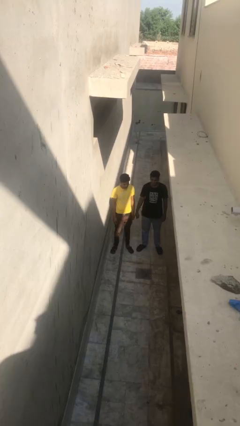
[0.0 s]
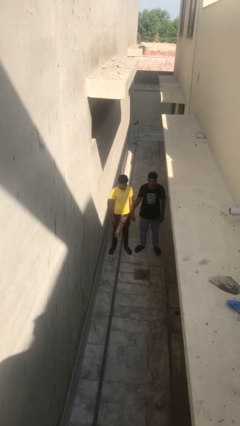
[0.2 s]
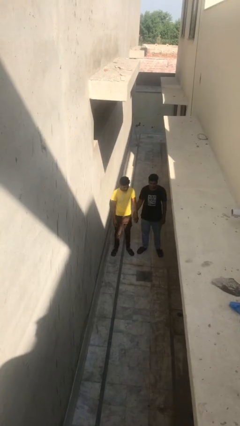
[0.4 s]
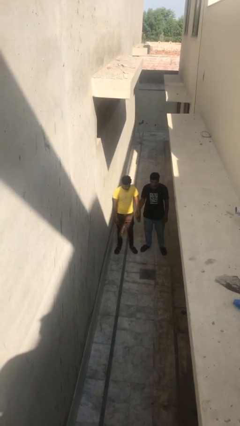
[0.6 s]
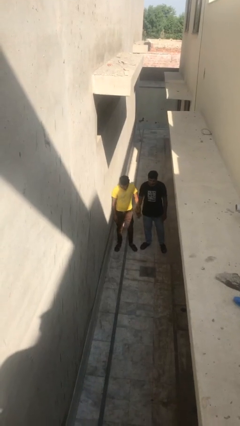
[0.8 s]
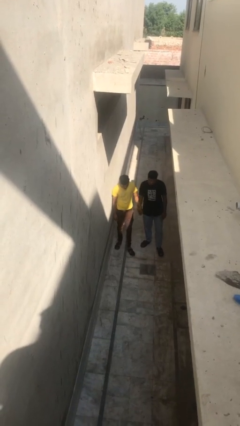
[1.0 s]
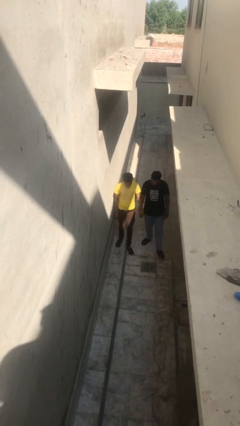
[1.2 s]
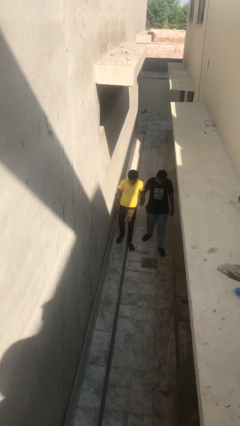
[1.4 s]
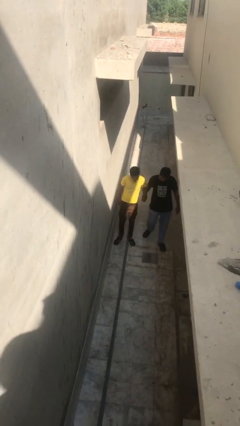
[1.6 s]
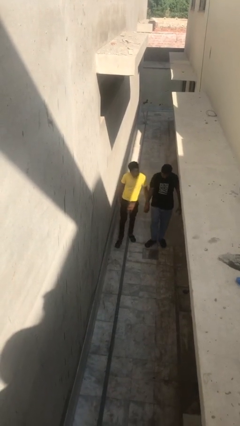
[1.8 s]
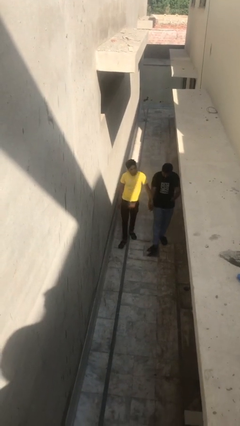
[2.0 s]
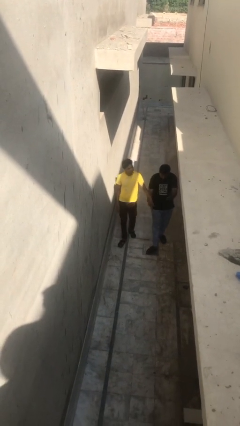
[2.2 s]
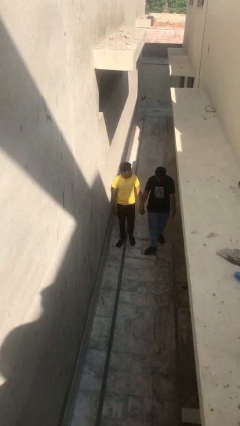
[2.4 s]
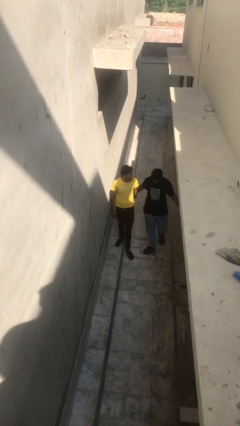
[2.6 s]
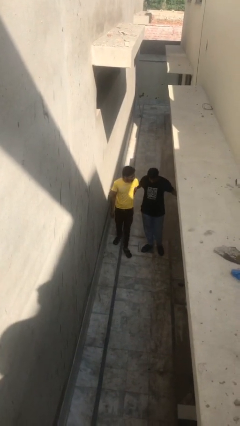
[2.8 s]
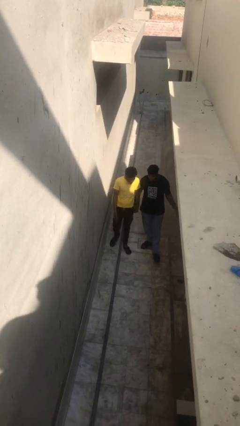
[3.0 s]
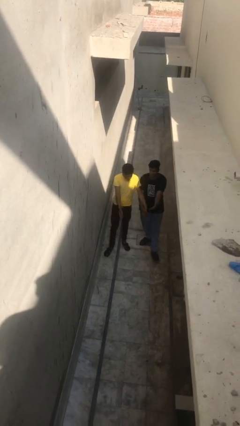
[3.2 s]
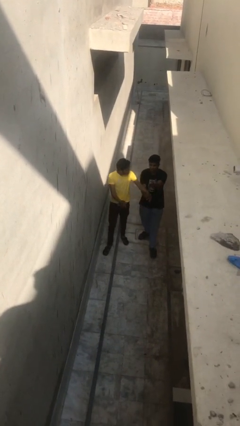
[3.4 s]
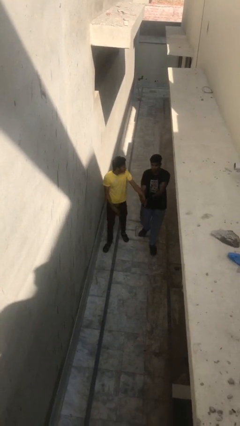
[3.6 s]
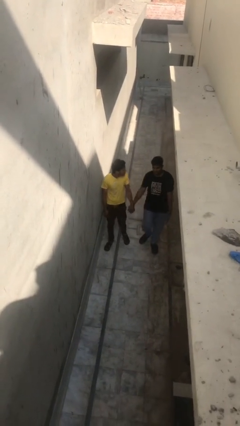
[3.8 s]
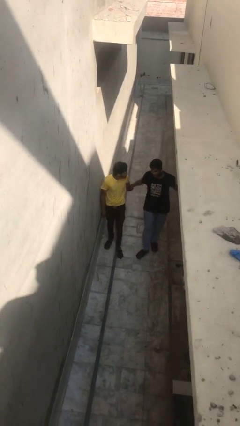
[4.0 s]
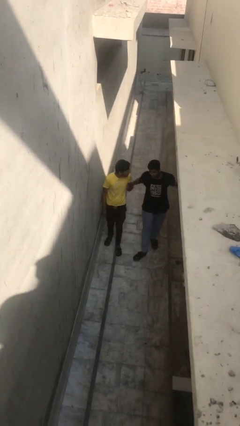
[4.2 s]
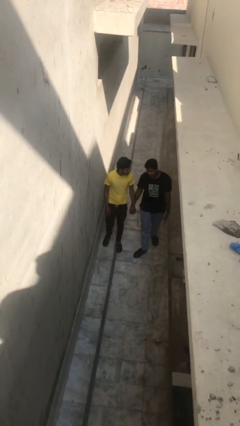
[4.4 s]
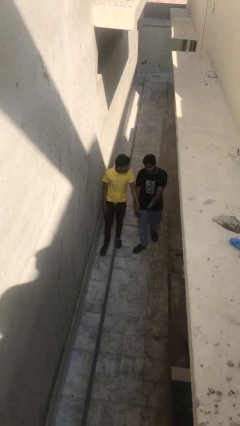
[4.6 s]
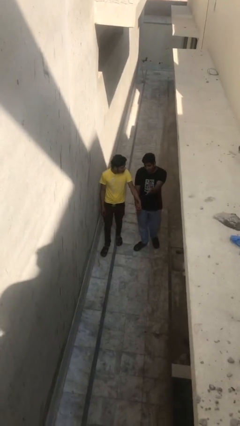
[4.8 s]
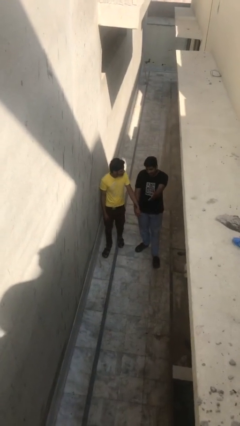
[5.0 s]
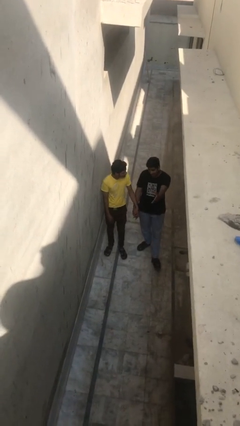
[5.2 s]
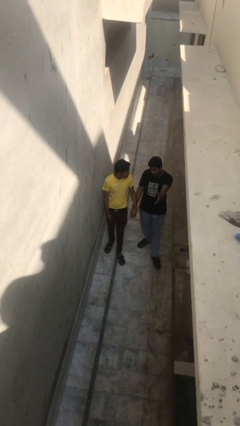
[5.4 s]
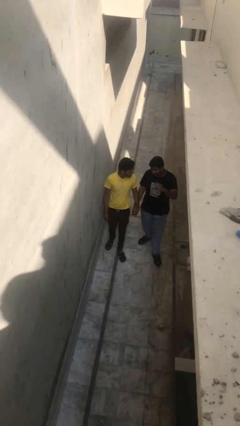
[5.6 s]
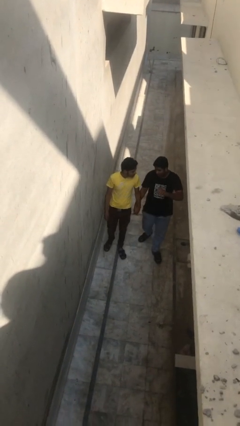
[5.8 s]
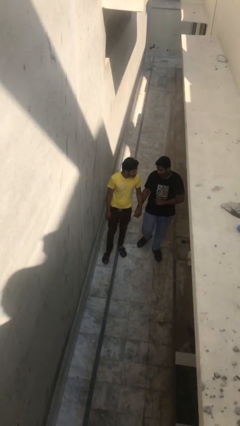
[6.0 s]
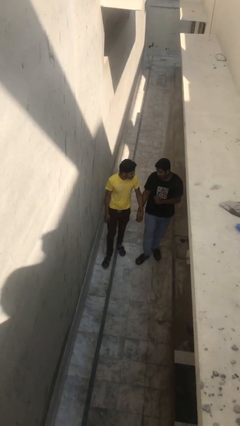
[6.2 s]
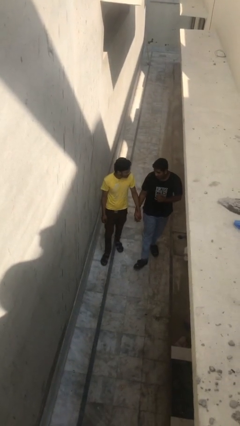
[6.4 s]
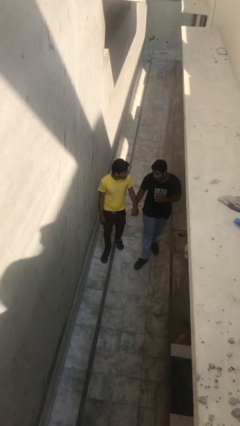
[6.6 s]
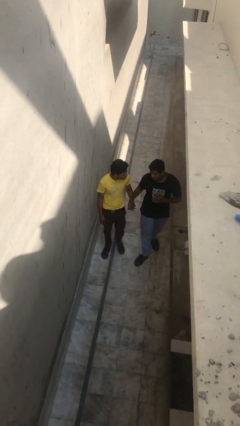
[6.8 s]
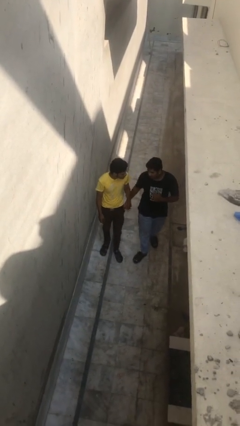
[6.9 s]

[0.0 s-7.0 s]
person holds hand

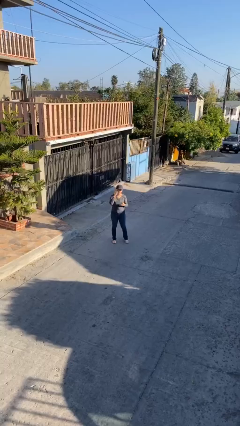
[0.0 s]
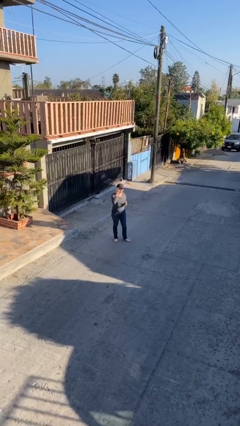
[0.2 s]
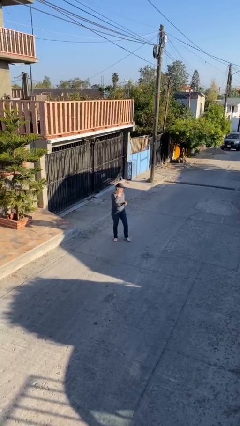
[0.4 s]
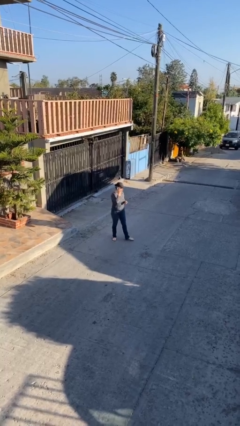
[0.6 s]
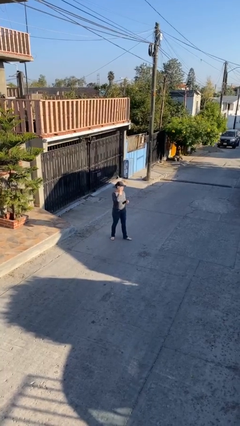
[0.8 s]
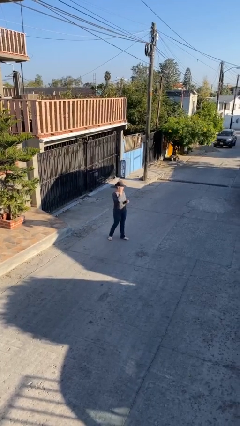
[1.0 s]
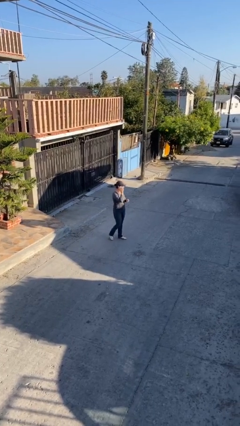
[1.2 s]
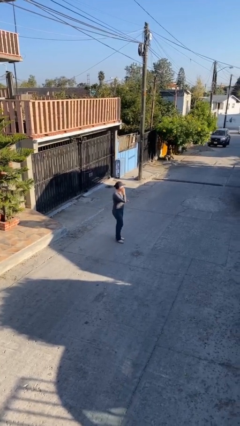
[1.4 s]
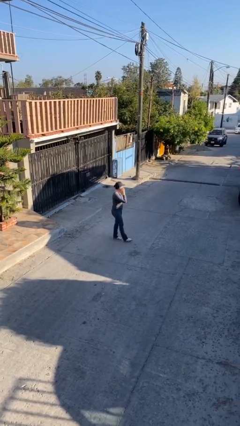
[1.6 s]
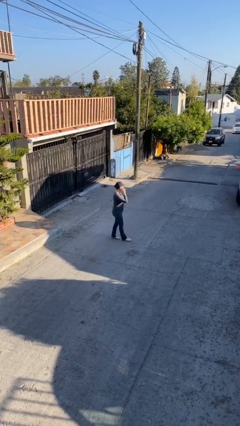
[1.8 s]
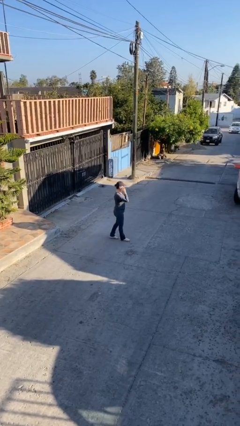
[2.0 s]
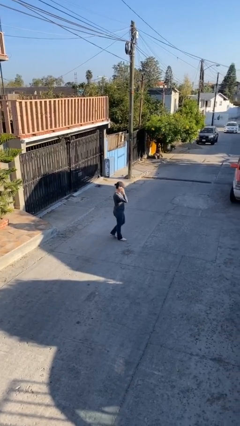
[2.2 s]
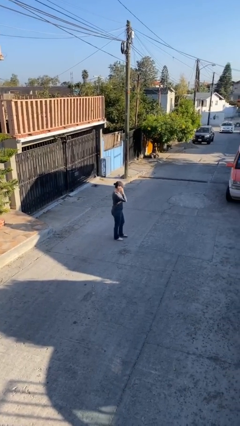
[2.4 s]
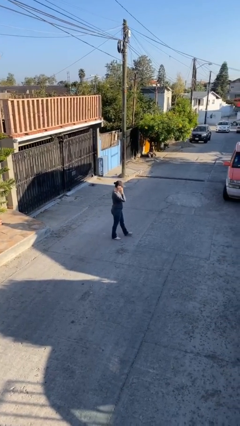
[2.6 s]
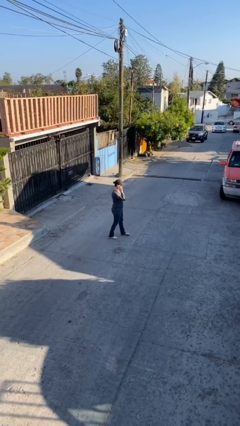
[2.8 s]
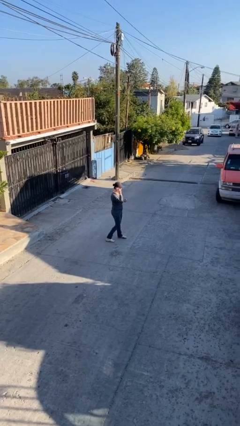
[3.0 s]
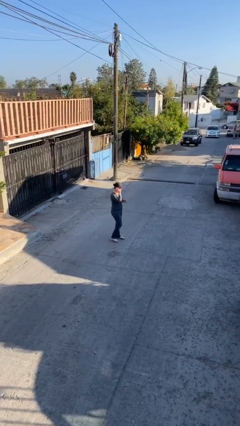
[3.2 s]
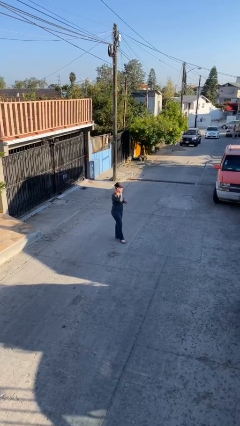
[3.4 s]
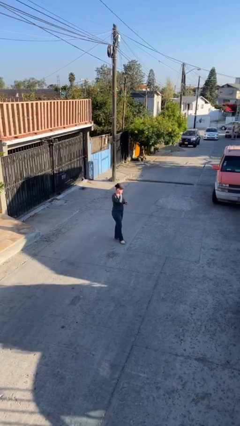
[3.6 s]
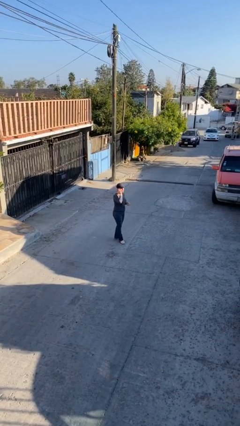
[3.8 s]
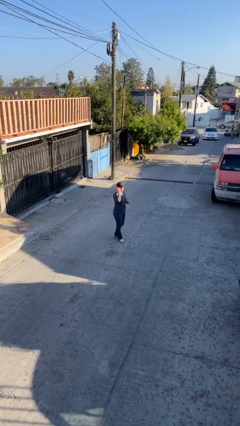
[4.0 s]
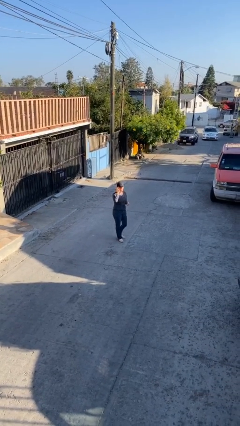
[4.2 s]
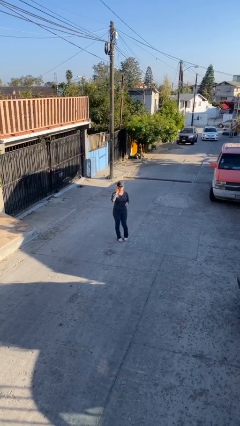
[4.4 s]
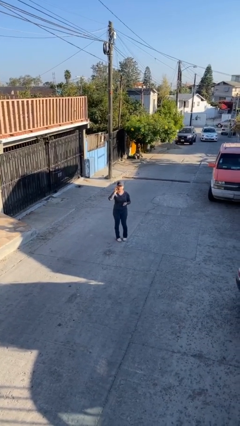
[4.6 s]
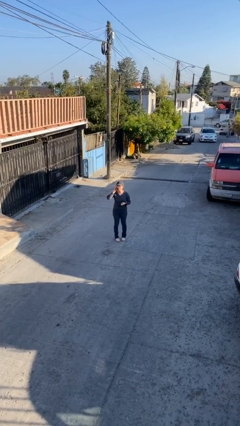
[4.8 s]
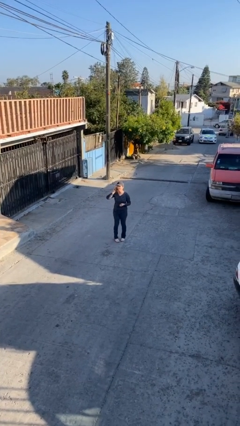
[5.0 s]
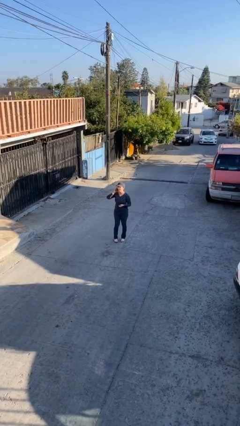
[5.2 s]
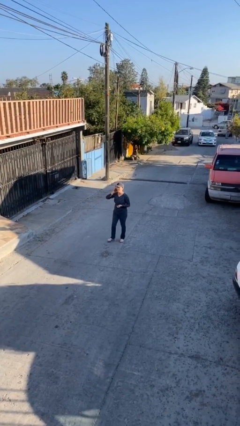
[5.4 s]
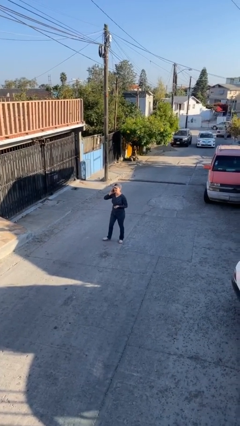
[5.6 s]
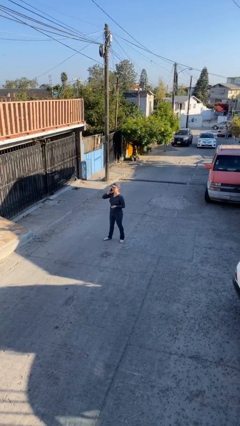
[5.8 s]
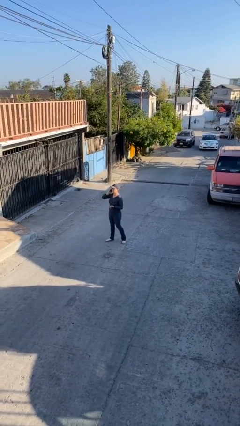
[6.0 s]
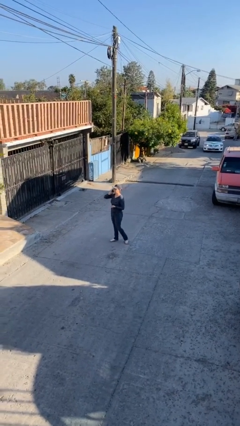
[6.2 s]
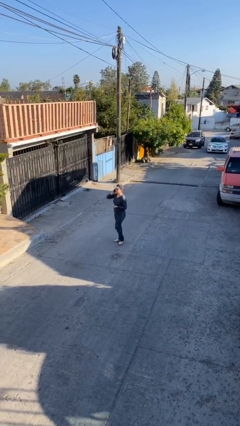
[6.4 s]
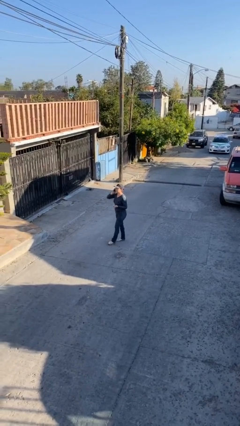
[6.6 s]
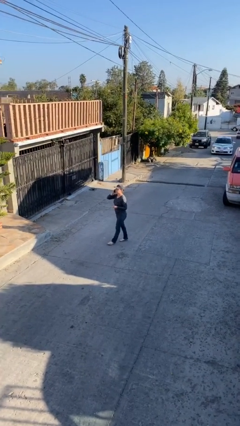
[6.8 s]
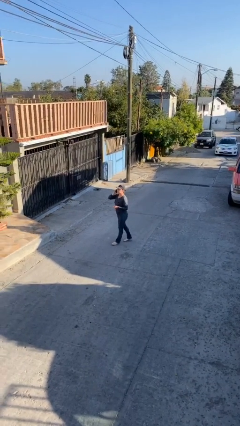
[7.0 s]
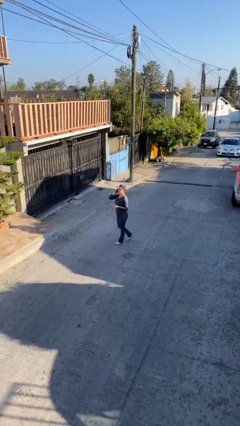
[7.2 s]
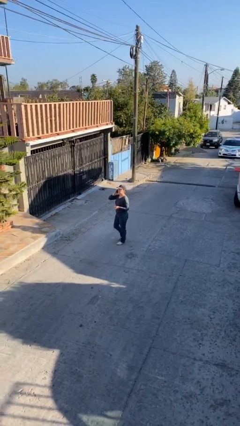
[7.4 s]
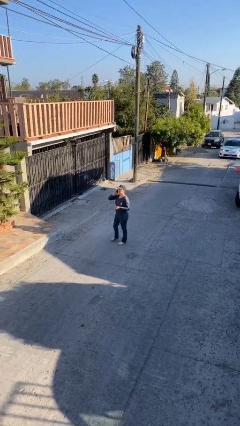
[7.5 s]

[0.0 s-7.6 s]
person talks on phone

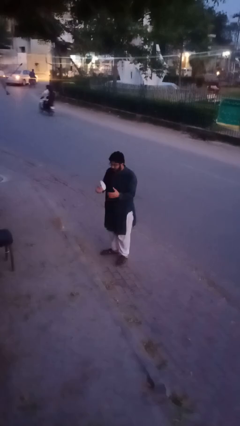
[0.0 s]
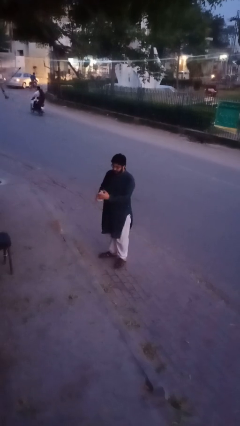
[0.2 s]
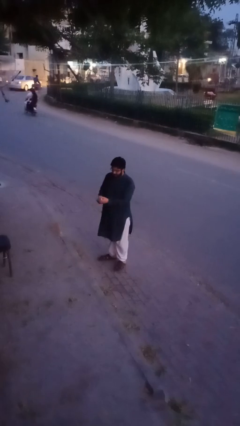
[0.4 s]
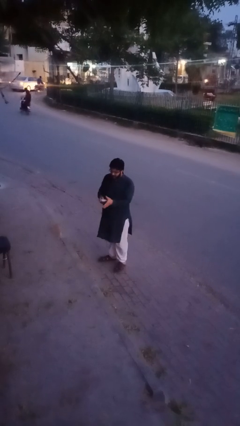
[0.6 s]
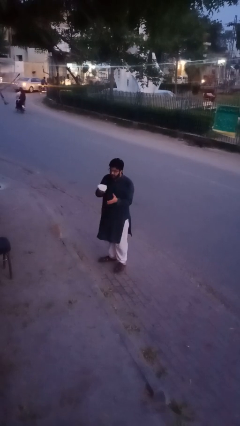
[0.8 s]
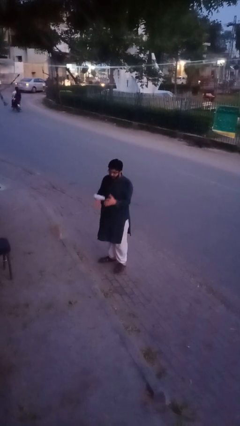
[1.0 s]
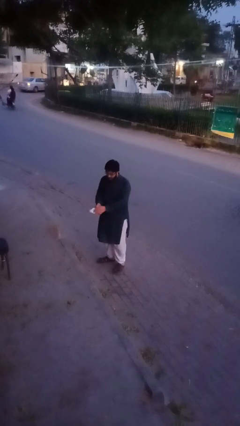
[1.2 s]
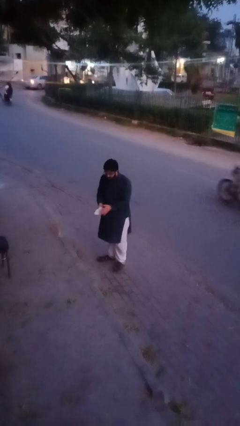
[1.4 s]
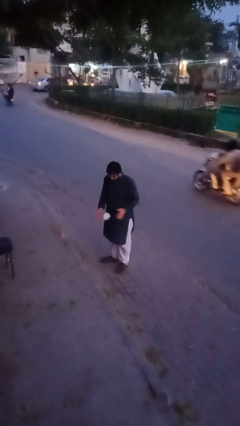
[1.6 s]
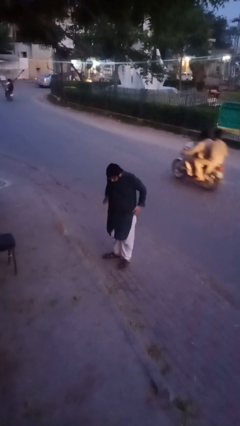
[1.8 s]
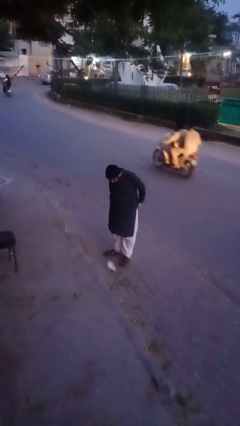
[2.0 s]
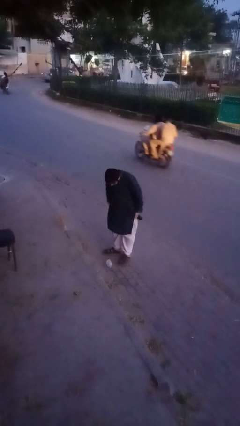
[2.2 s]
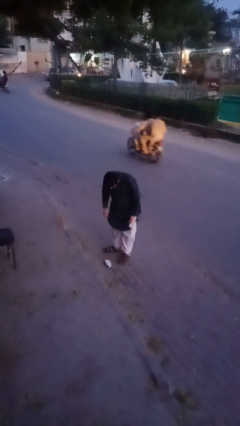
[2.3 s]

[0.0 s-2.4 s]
person drops object

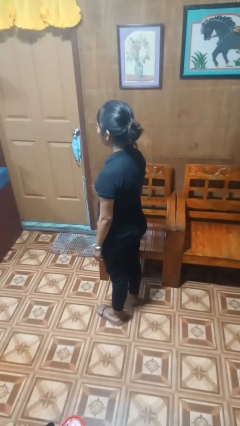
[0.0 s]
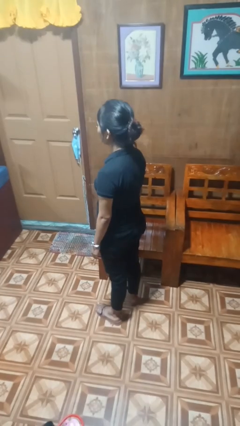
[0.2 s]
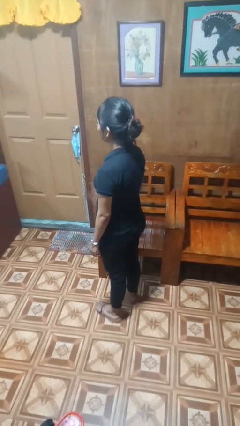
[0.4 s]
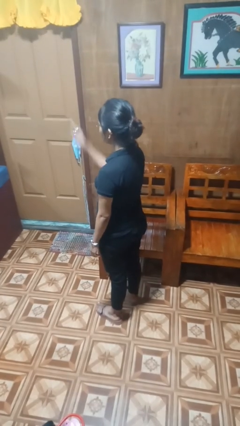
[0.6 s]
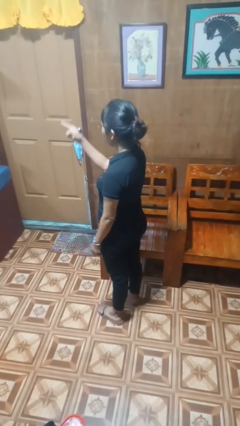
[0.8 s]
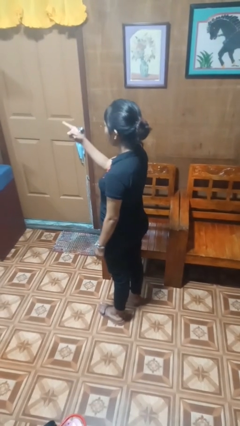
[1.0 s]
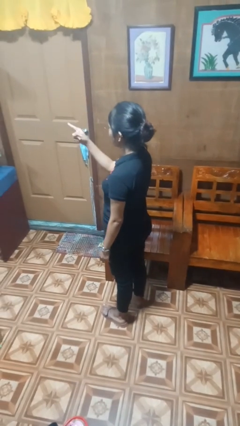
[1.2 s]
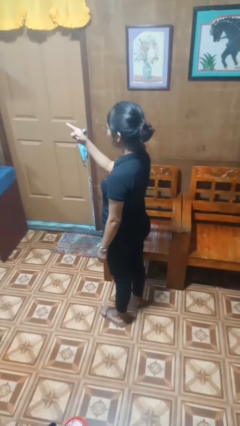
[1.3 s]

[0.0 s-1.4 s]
person points at person
